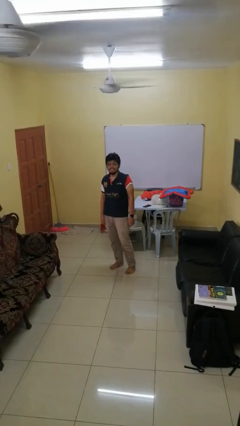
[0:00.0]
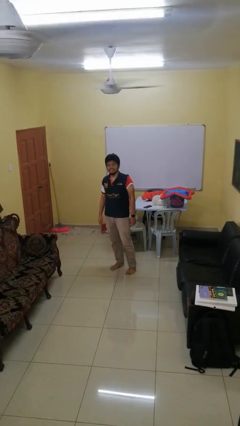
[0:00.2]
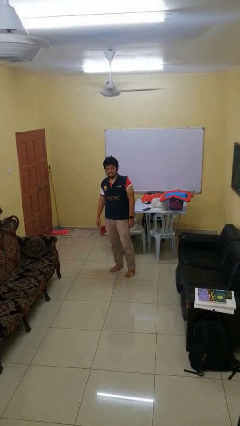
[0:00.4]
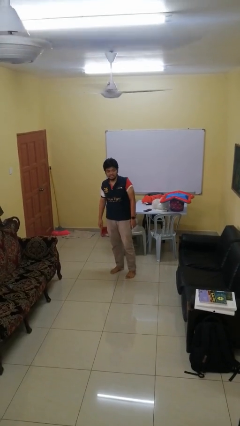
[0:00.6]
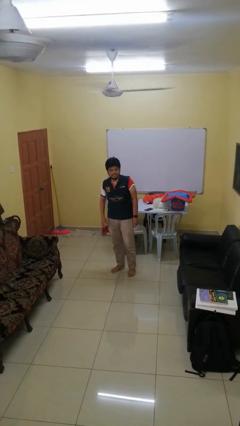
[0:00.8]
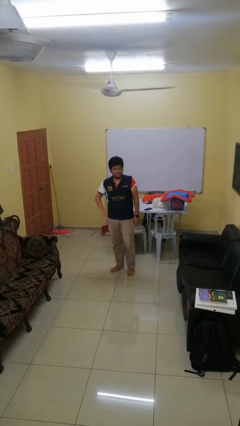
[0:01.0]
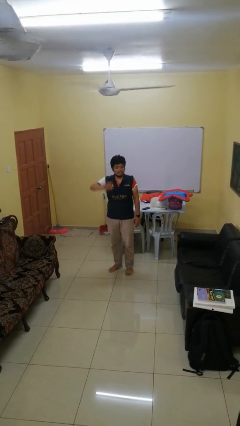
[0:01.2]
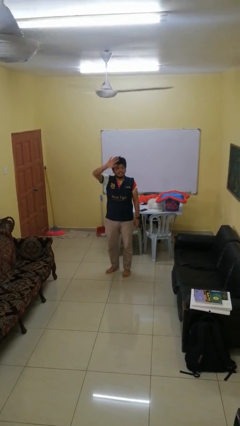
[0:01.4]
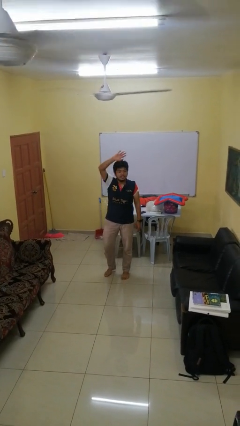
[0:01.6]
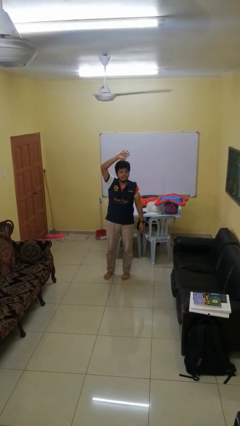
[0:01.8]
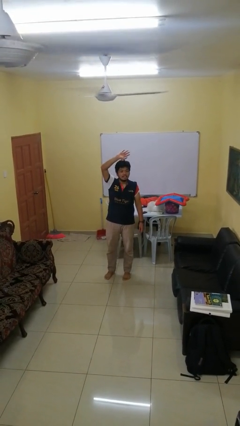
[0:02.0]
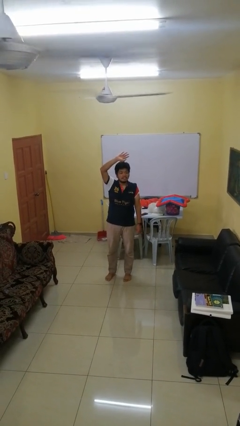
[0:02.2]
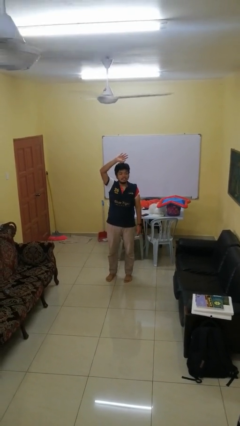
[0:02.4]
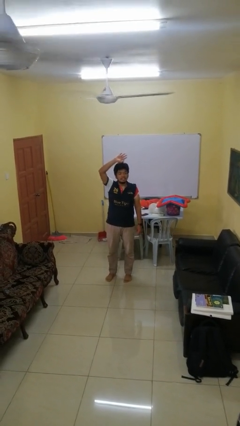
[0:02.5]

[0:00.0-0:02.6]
person gestures raise hand

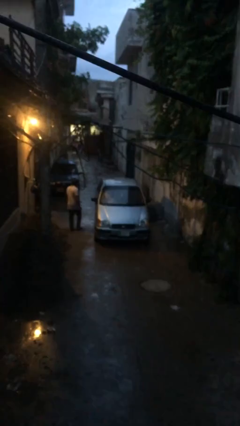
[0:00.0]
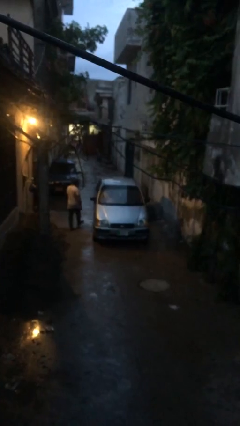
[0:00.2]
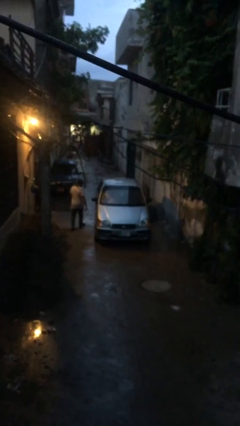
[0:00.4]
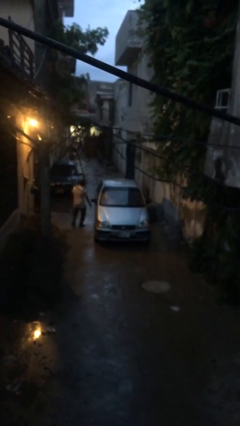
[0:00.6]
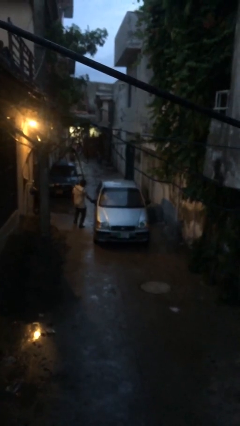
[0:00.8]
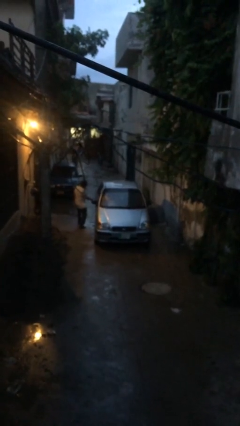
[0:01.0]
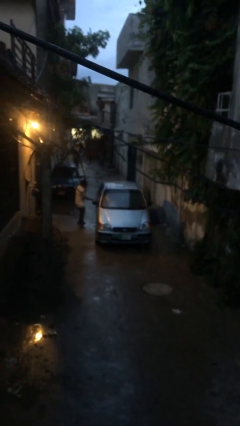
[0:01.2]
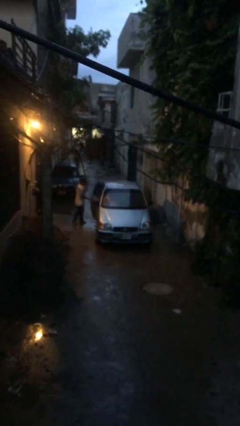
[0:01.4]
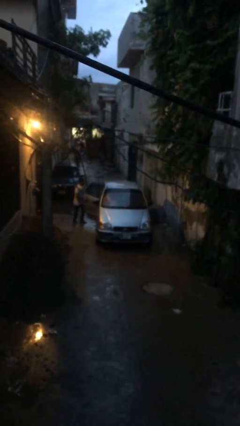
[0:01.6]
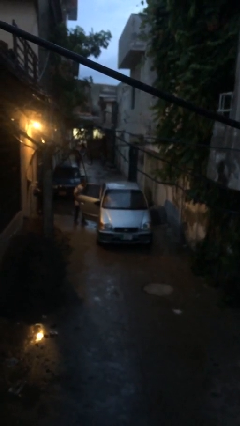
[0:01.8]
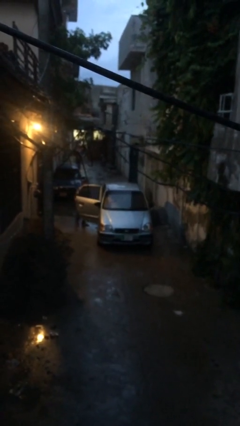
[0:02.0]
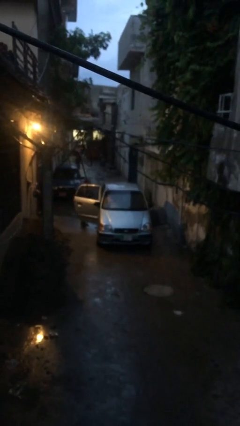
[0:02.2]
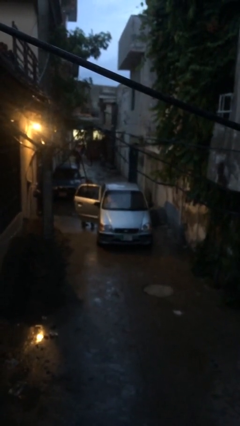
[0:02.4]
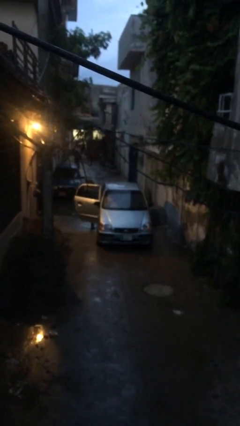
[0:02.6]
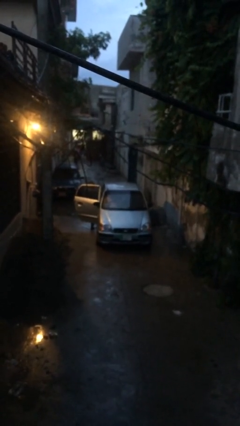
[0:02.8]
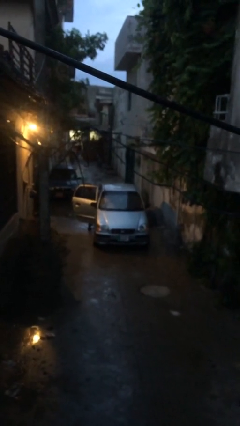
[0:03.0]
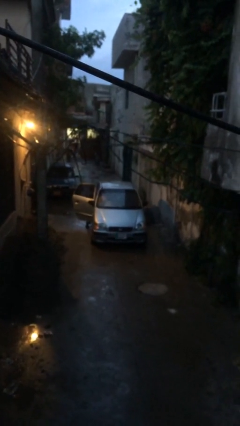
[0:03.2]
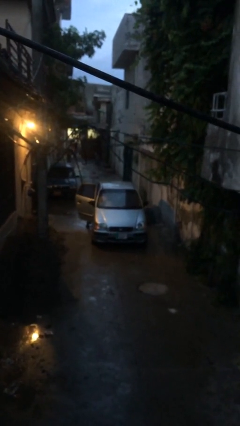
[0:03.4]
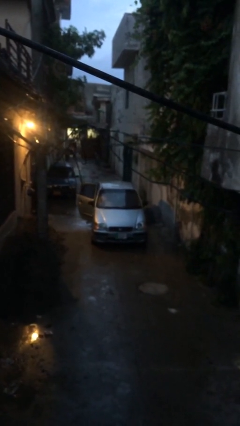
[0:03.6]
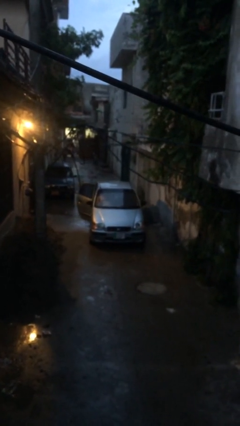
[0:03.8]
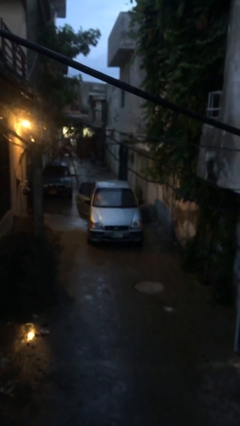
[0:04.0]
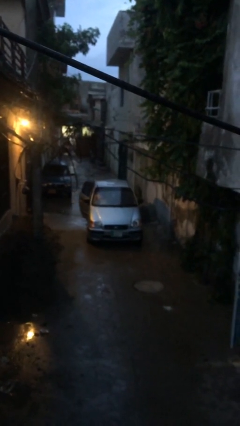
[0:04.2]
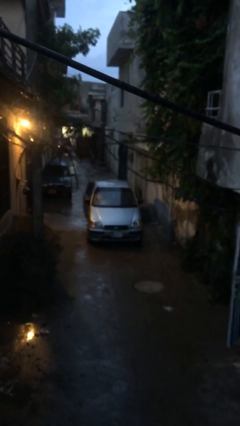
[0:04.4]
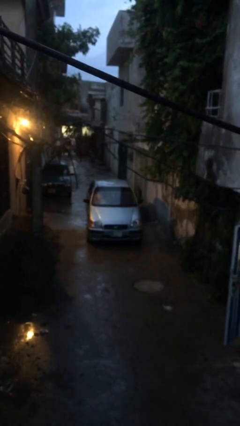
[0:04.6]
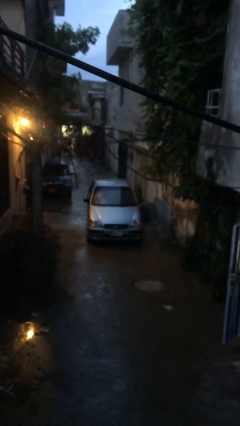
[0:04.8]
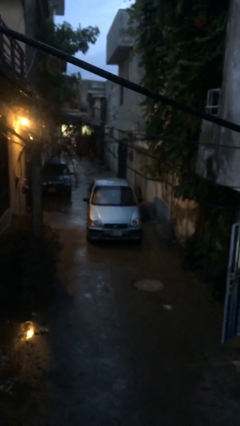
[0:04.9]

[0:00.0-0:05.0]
car picks up person

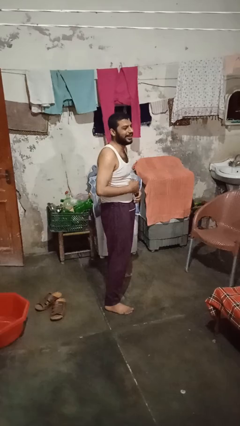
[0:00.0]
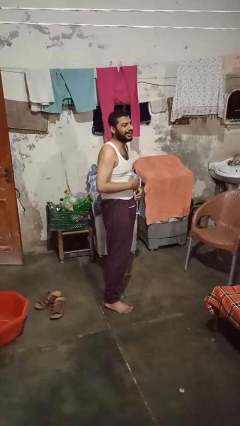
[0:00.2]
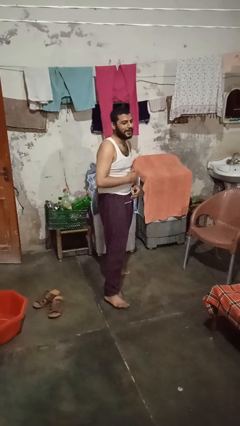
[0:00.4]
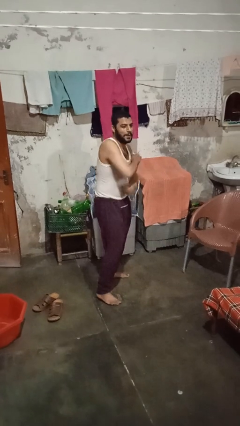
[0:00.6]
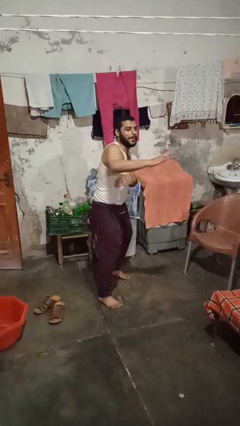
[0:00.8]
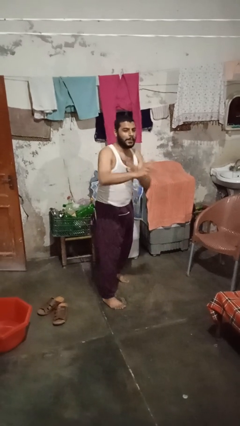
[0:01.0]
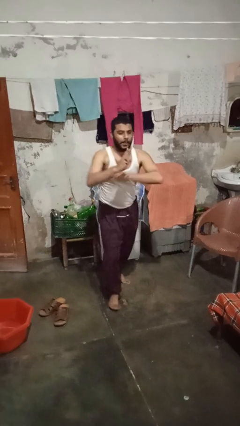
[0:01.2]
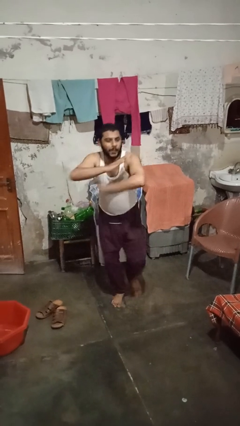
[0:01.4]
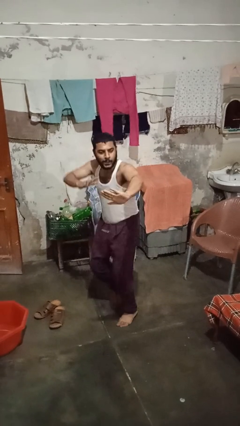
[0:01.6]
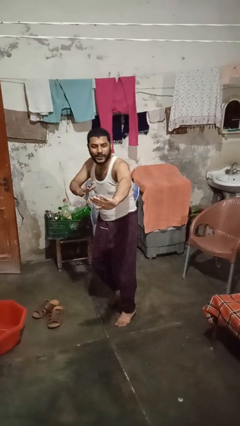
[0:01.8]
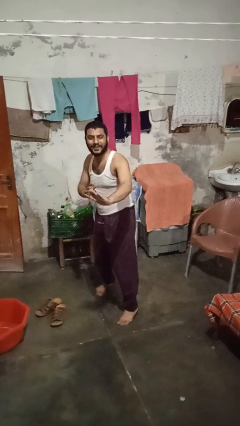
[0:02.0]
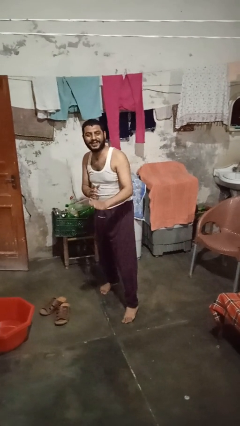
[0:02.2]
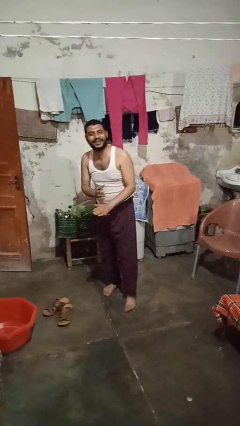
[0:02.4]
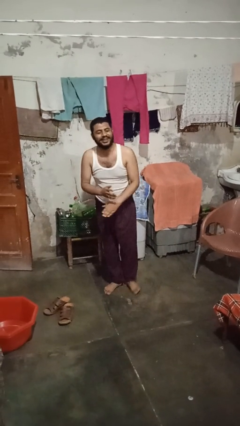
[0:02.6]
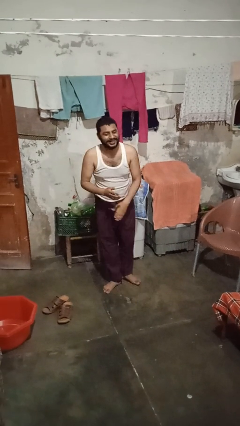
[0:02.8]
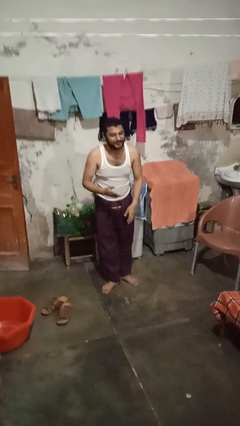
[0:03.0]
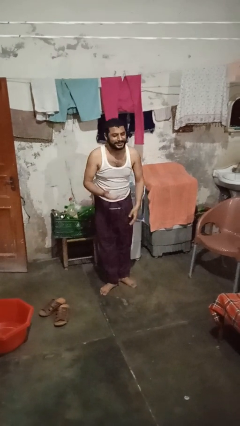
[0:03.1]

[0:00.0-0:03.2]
person karate chop

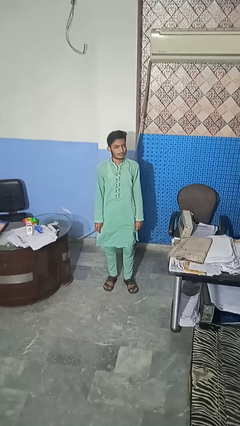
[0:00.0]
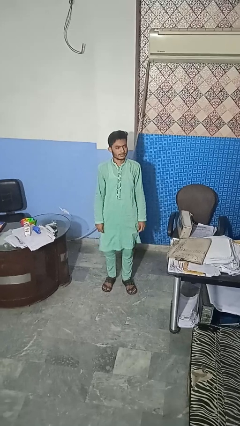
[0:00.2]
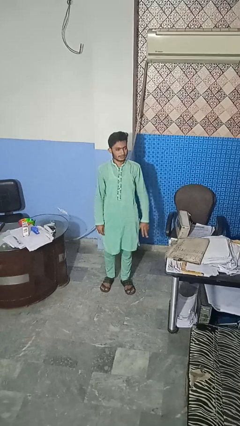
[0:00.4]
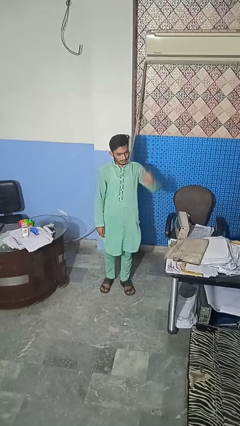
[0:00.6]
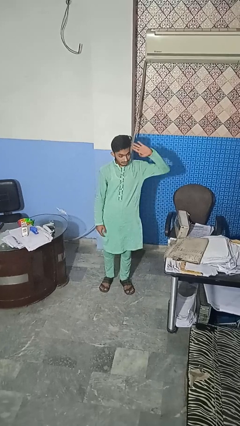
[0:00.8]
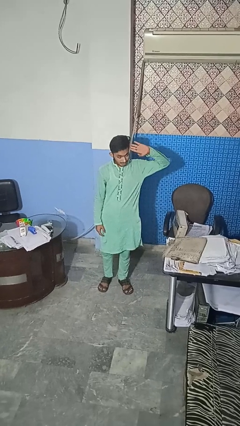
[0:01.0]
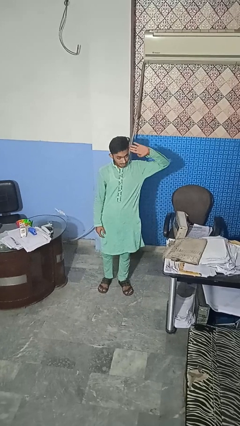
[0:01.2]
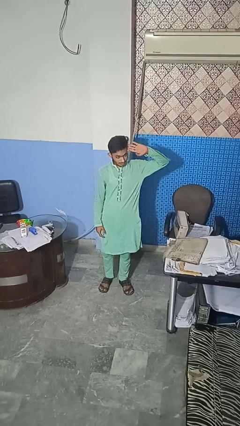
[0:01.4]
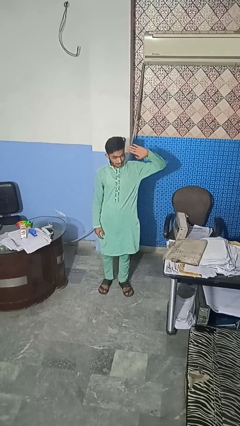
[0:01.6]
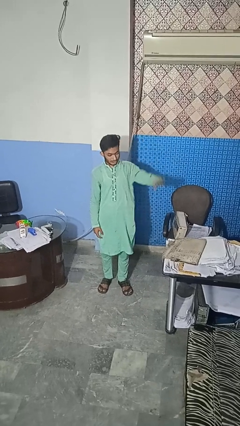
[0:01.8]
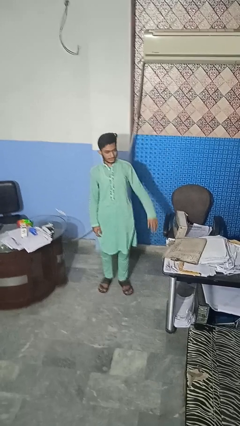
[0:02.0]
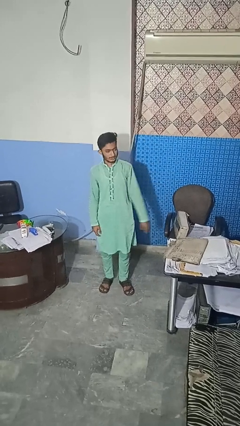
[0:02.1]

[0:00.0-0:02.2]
person salutes

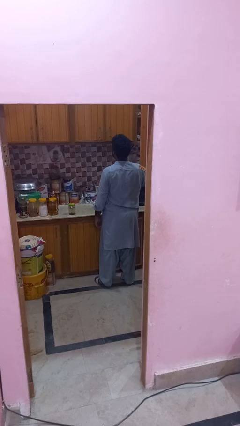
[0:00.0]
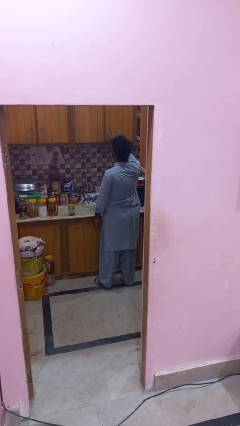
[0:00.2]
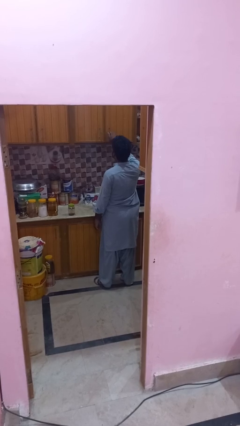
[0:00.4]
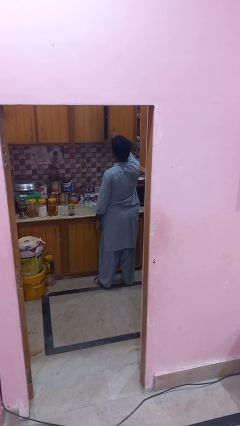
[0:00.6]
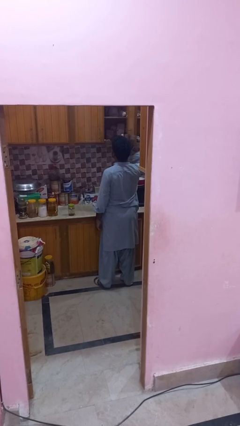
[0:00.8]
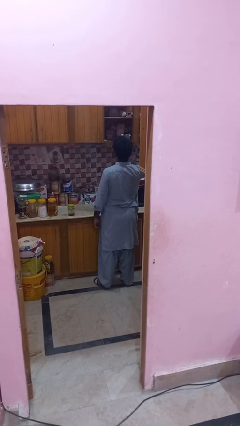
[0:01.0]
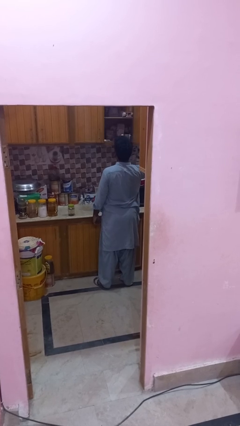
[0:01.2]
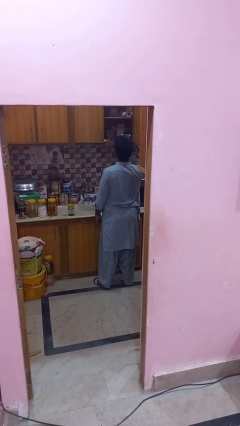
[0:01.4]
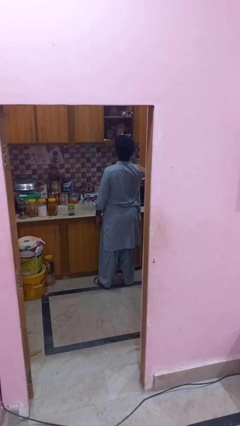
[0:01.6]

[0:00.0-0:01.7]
person opens cabinet

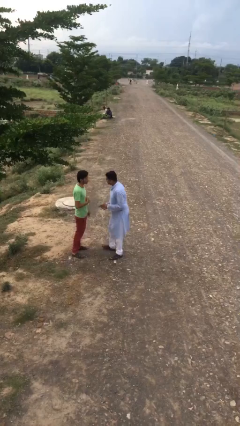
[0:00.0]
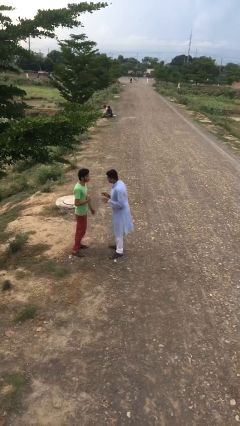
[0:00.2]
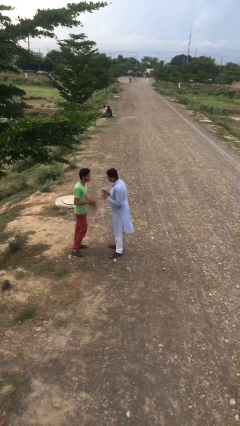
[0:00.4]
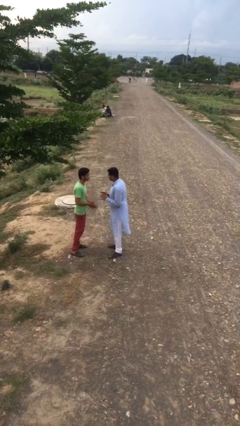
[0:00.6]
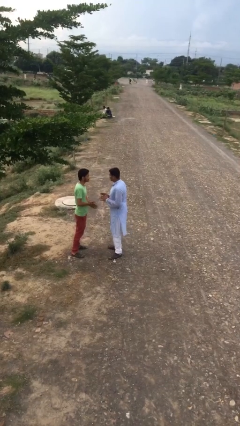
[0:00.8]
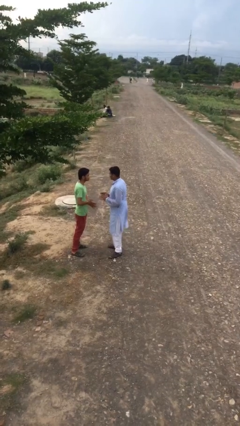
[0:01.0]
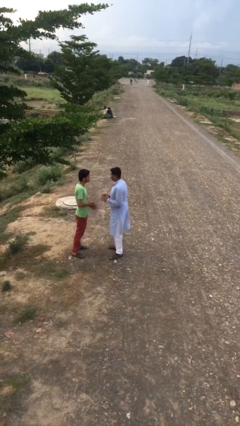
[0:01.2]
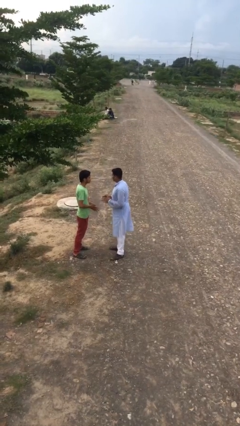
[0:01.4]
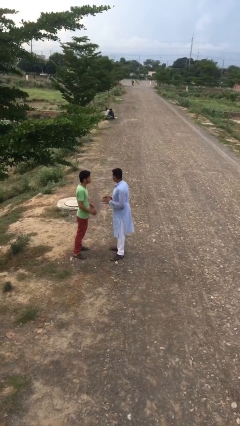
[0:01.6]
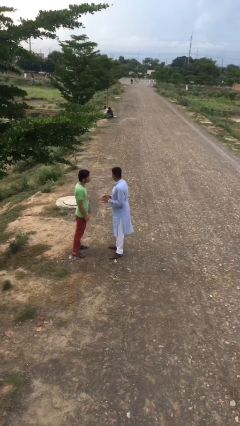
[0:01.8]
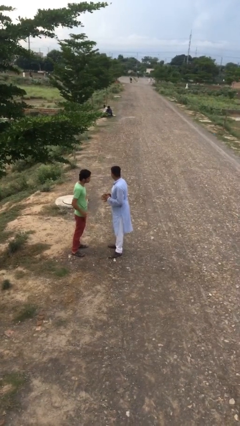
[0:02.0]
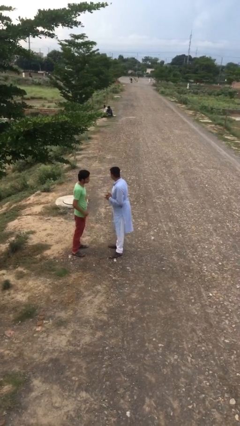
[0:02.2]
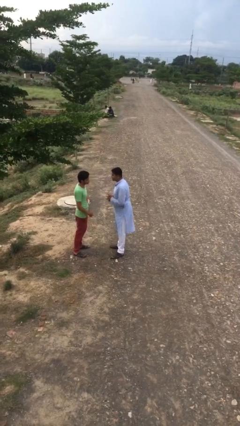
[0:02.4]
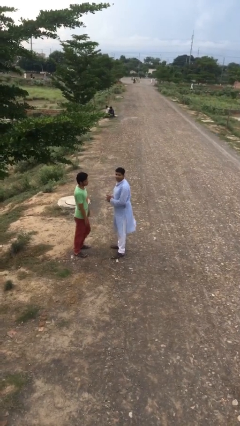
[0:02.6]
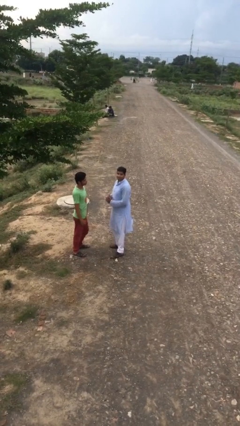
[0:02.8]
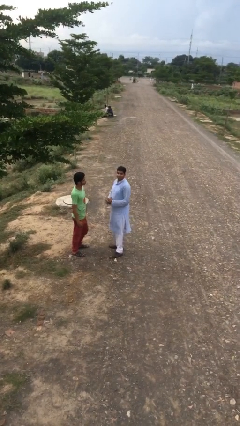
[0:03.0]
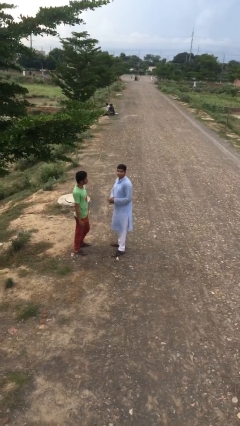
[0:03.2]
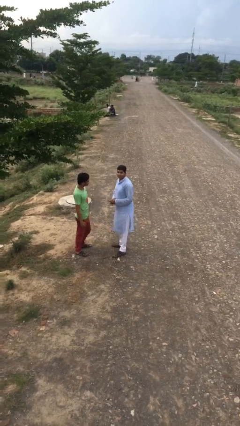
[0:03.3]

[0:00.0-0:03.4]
person talks to person
